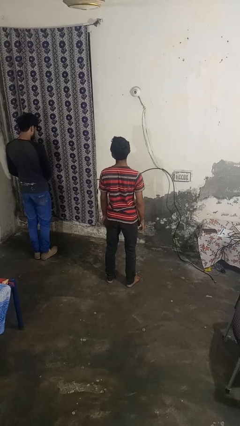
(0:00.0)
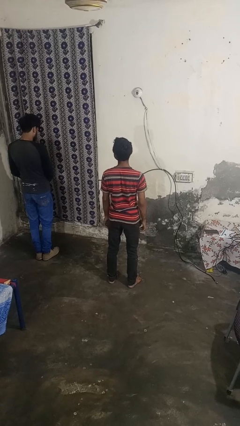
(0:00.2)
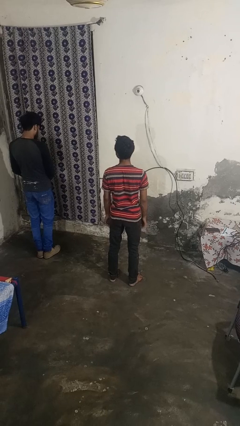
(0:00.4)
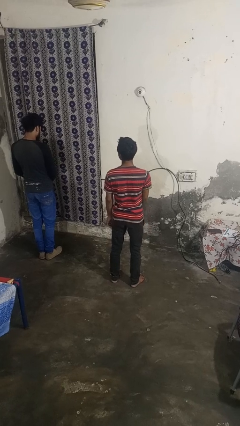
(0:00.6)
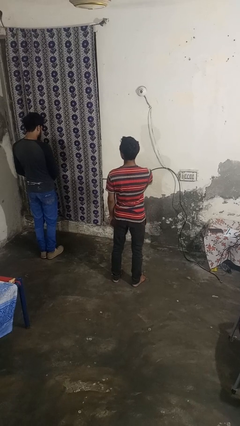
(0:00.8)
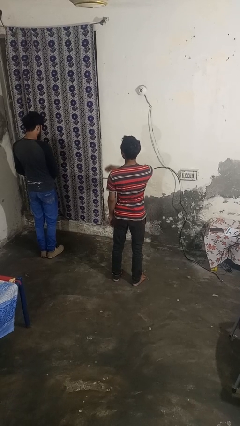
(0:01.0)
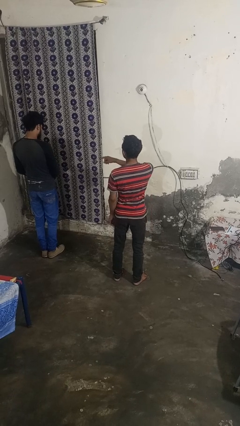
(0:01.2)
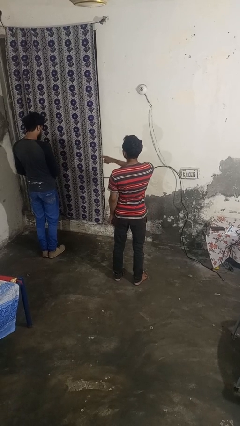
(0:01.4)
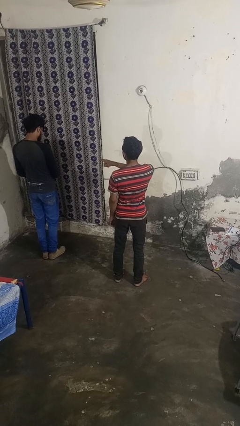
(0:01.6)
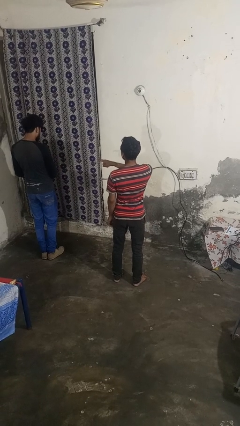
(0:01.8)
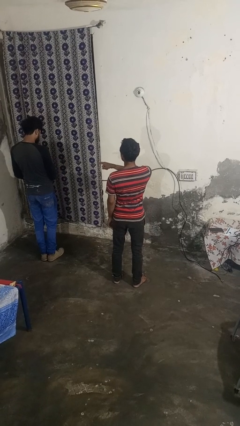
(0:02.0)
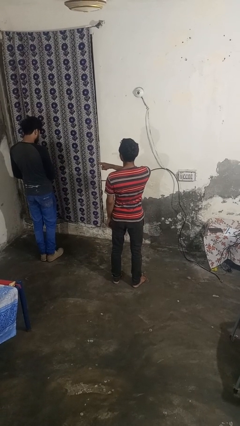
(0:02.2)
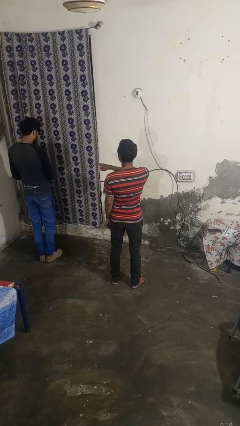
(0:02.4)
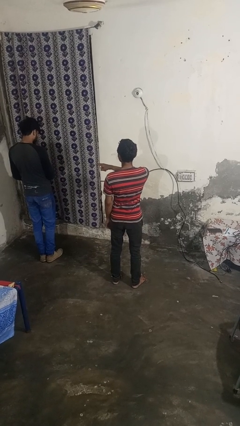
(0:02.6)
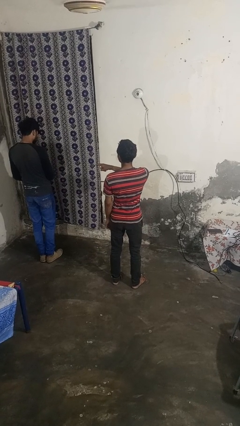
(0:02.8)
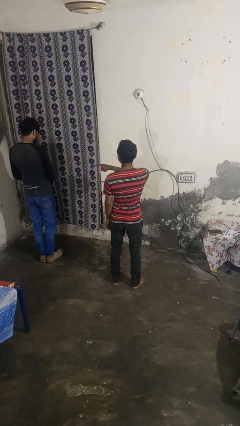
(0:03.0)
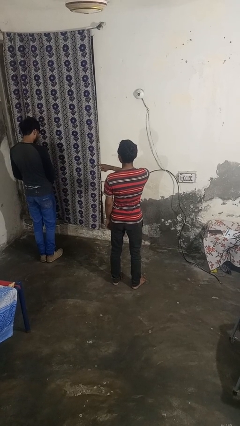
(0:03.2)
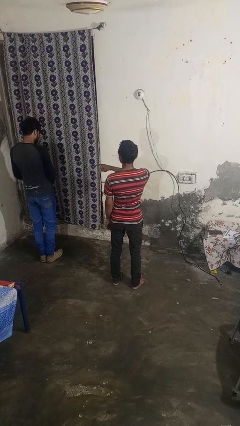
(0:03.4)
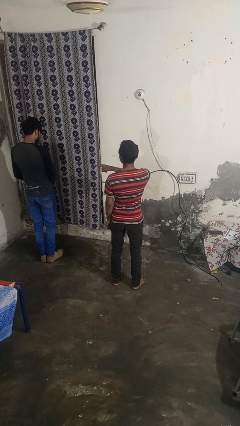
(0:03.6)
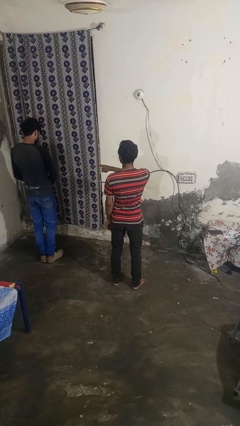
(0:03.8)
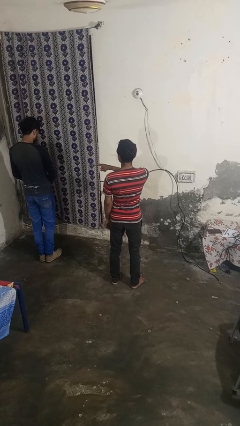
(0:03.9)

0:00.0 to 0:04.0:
person points at person

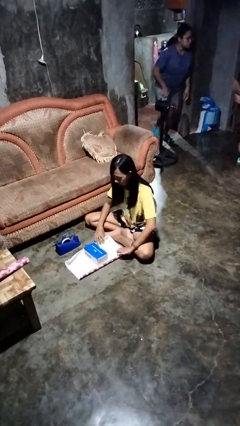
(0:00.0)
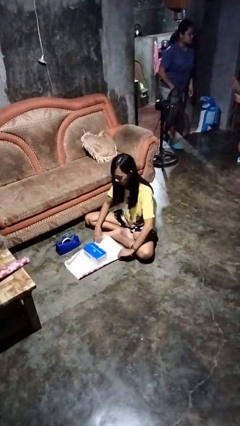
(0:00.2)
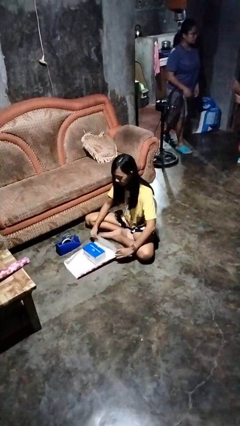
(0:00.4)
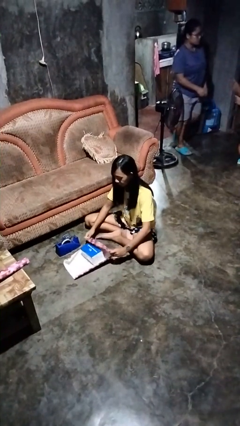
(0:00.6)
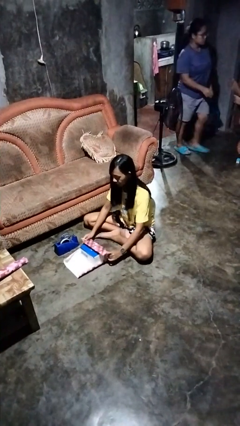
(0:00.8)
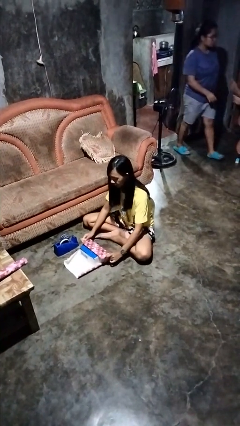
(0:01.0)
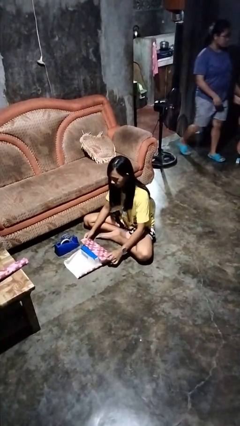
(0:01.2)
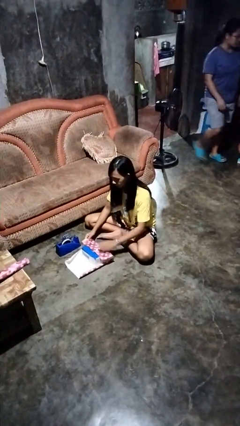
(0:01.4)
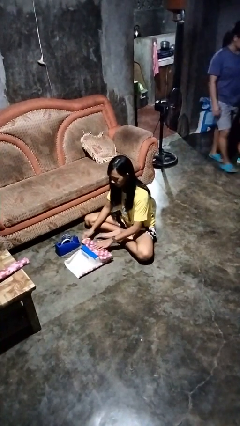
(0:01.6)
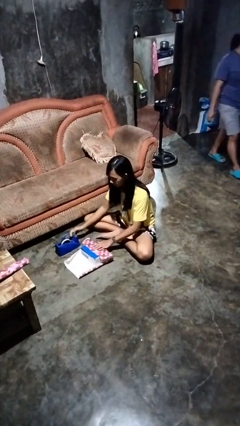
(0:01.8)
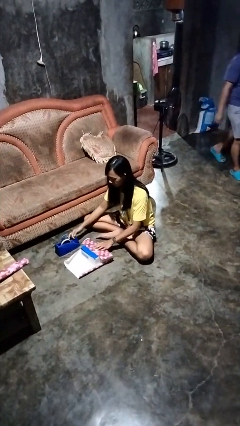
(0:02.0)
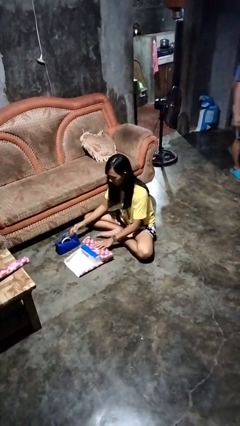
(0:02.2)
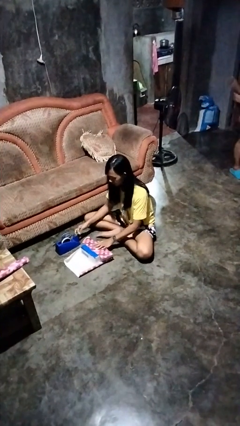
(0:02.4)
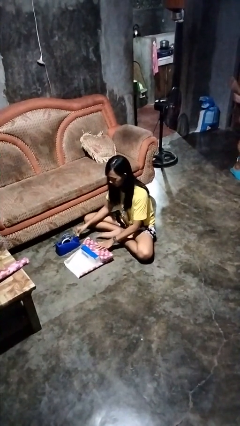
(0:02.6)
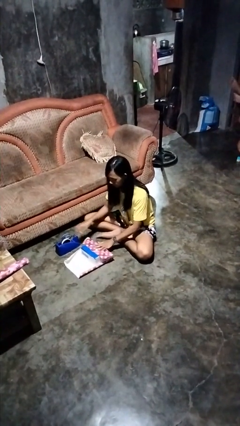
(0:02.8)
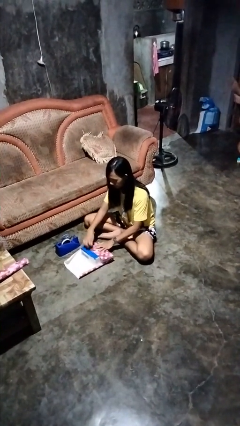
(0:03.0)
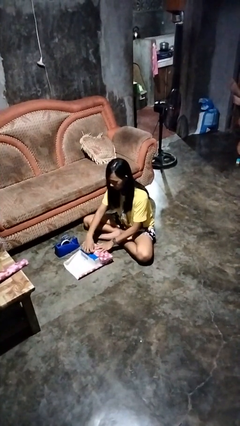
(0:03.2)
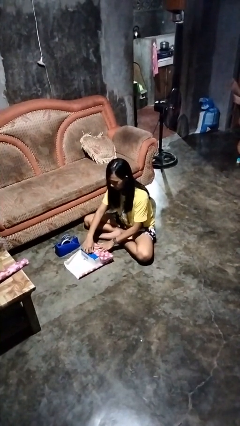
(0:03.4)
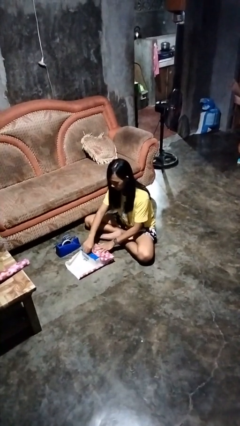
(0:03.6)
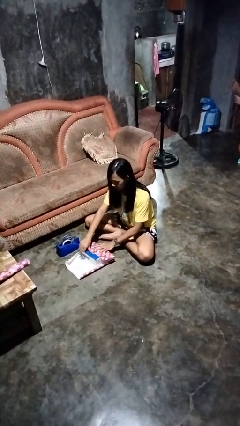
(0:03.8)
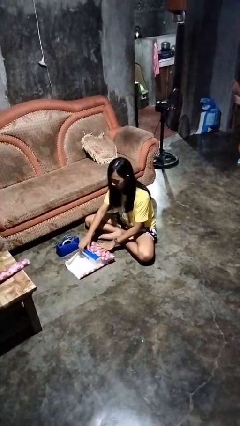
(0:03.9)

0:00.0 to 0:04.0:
person wraps box

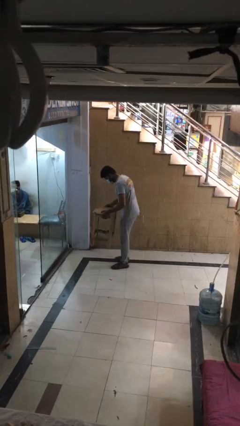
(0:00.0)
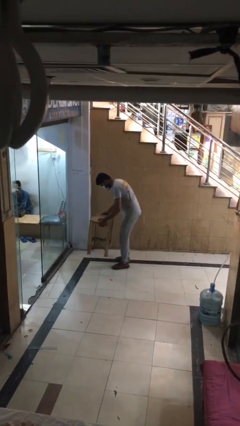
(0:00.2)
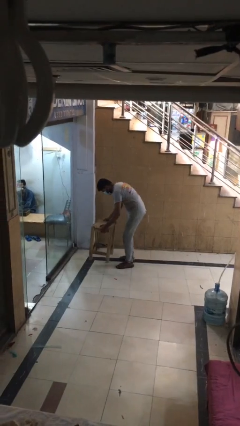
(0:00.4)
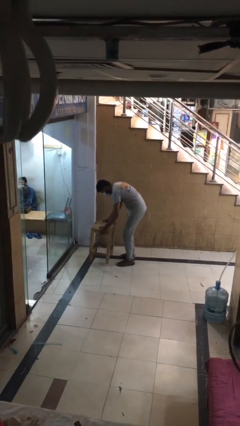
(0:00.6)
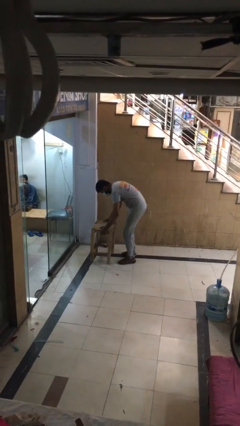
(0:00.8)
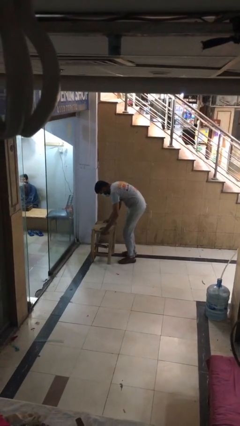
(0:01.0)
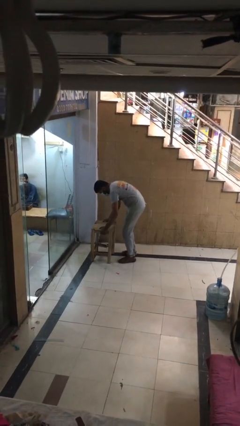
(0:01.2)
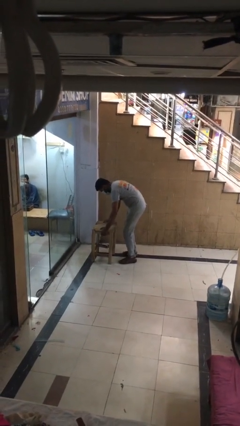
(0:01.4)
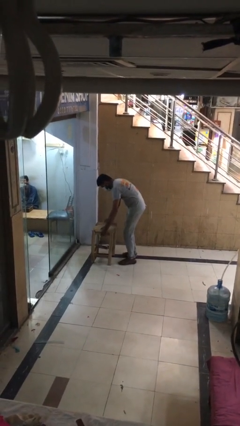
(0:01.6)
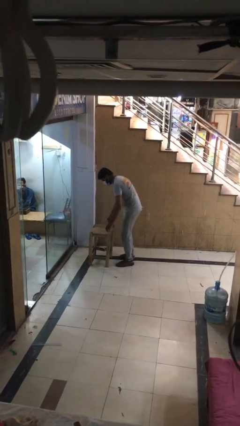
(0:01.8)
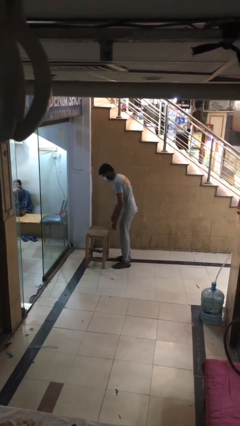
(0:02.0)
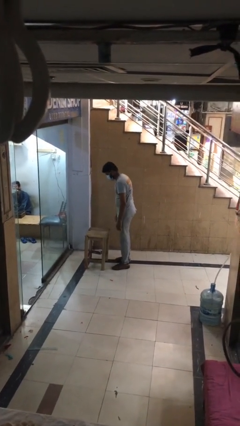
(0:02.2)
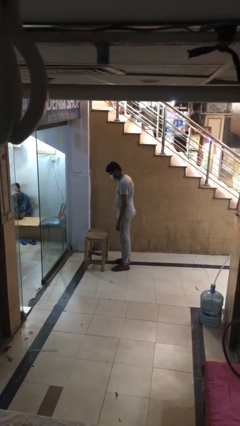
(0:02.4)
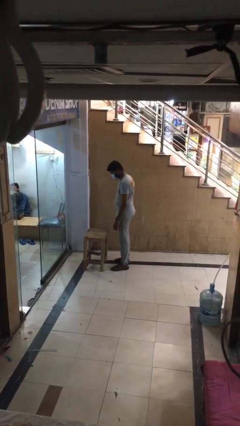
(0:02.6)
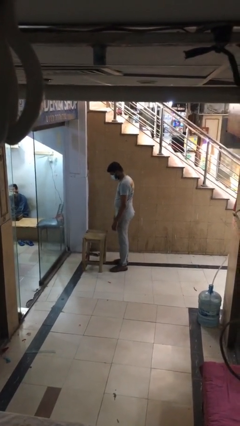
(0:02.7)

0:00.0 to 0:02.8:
person puts down object on floor

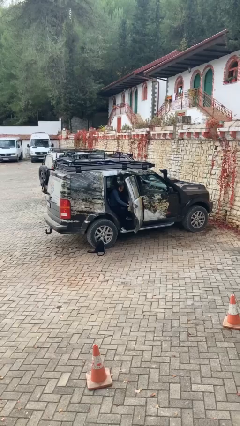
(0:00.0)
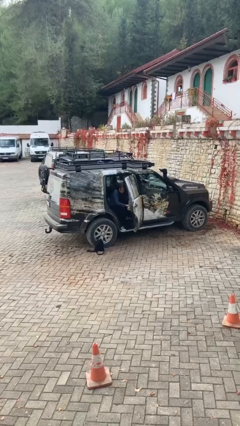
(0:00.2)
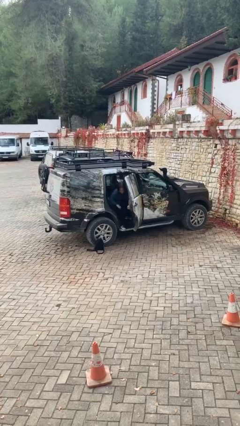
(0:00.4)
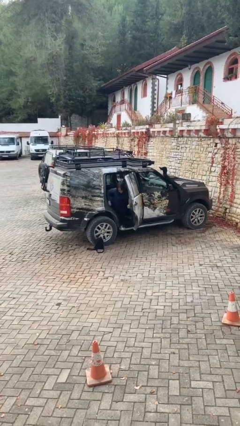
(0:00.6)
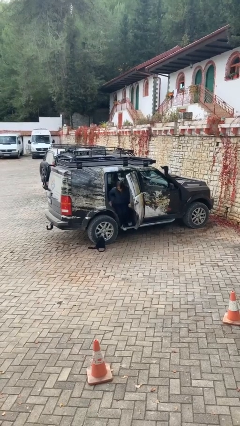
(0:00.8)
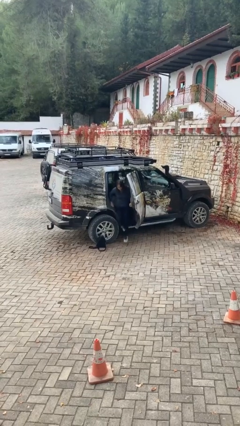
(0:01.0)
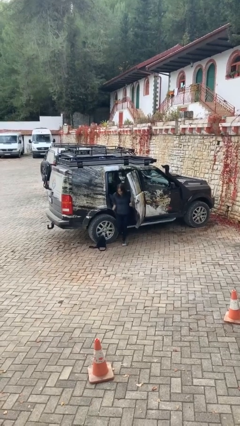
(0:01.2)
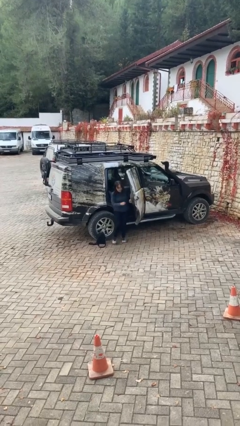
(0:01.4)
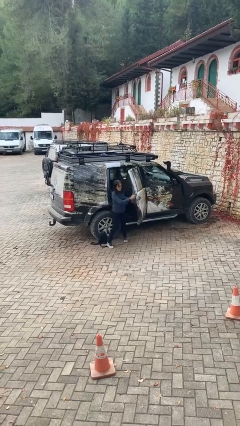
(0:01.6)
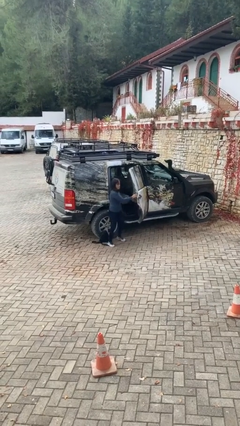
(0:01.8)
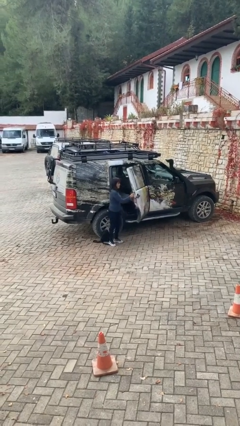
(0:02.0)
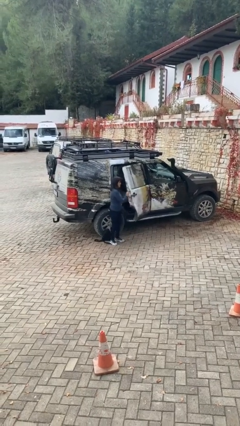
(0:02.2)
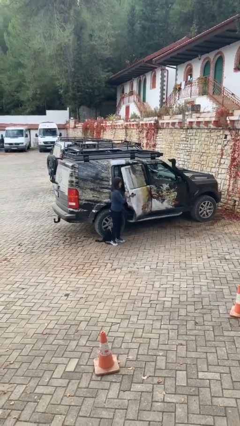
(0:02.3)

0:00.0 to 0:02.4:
person exits car

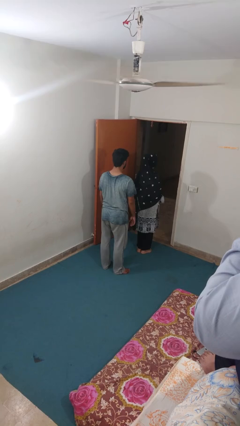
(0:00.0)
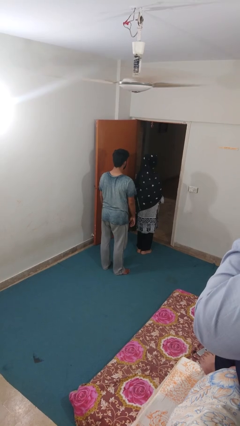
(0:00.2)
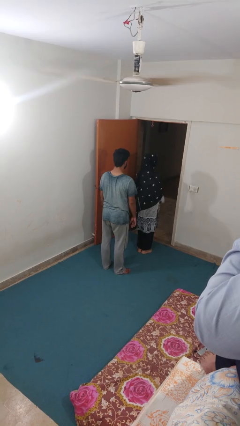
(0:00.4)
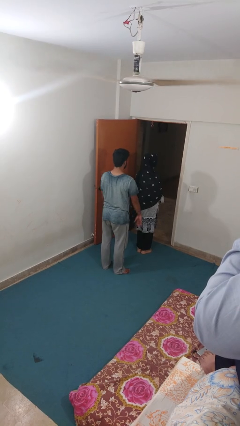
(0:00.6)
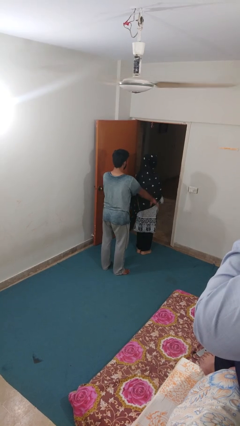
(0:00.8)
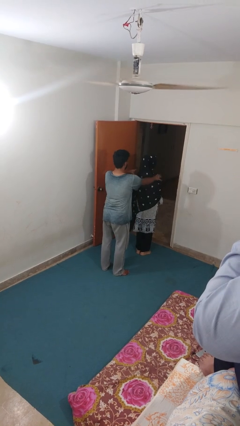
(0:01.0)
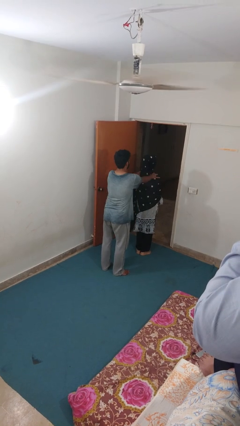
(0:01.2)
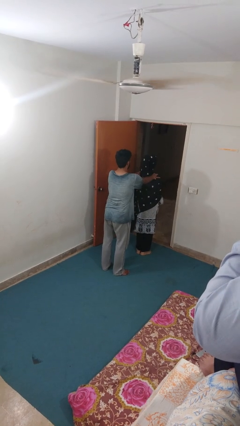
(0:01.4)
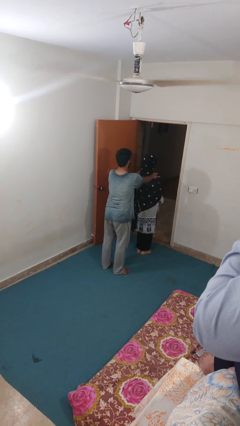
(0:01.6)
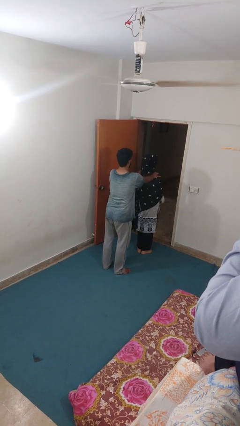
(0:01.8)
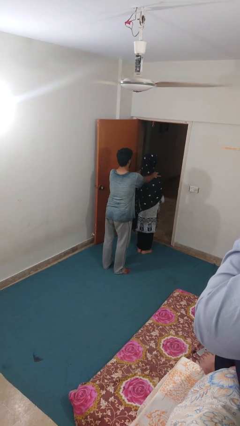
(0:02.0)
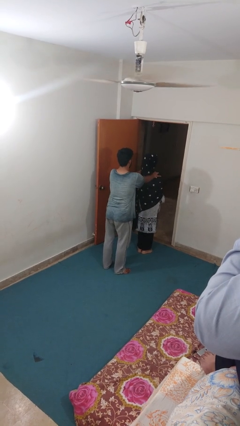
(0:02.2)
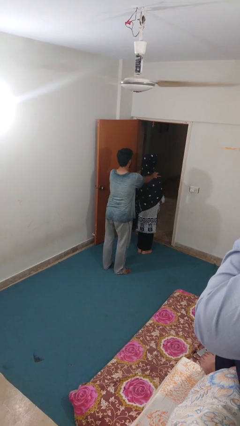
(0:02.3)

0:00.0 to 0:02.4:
person grabs person by shoulder

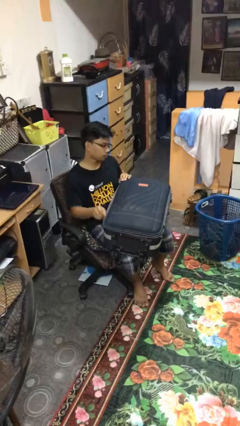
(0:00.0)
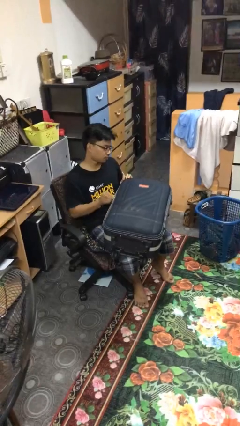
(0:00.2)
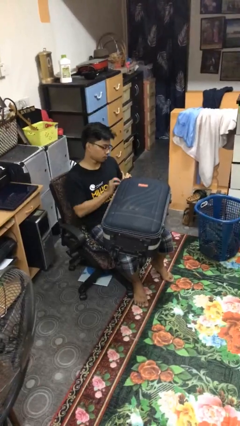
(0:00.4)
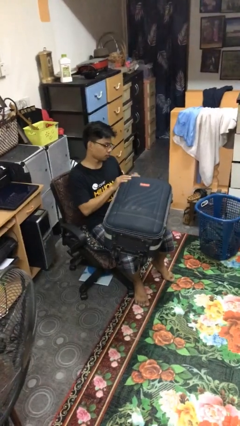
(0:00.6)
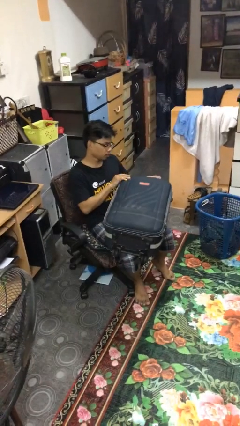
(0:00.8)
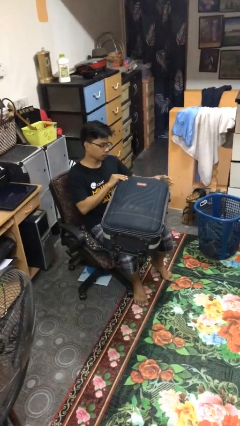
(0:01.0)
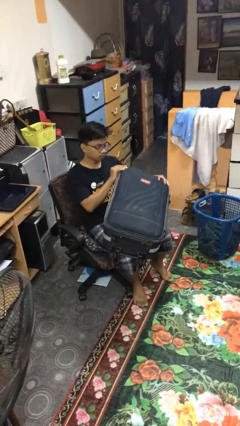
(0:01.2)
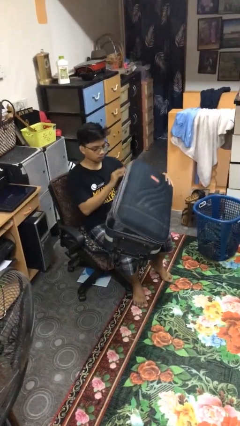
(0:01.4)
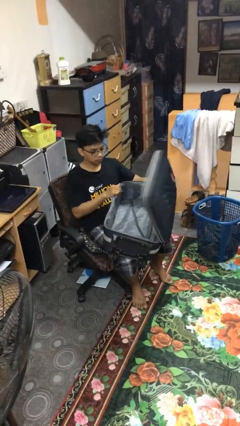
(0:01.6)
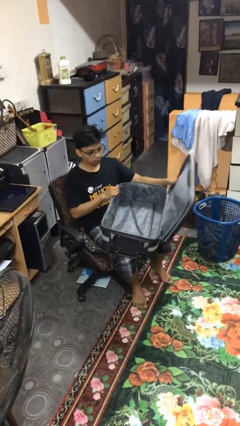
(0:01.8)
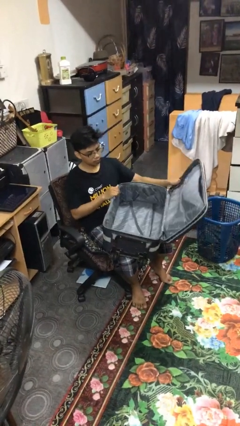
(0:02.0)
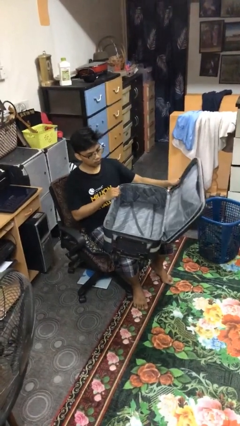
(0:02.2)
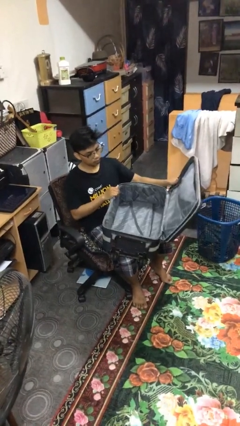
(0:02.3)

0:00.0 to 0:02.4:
person opens suitcase
